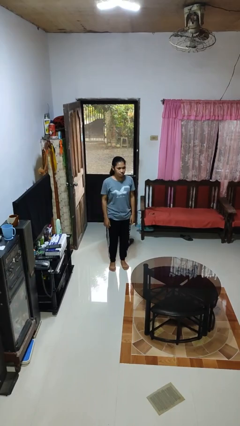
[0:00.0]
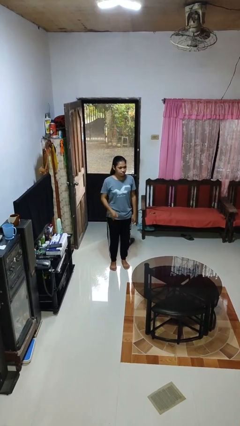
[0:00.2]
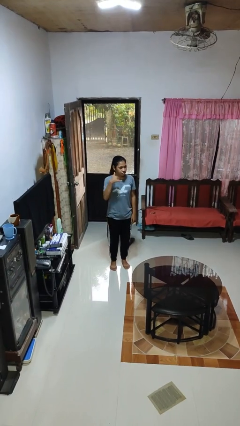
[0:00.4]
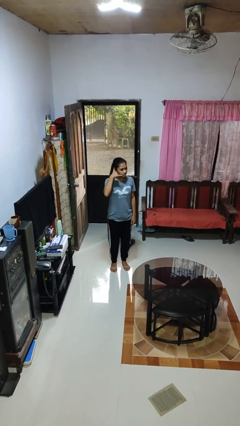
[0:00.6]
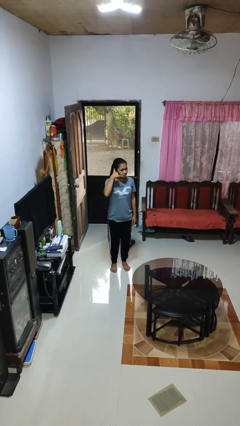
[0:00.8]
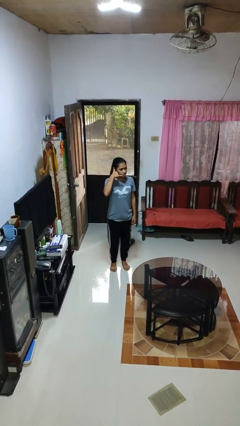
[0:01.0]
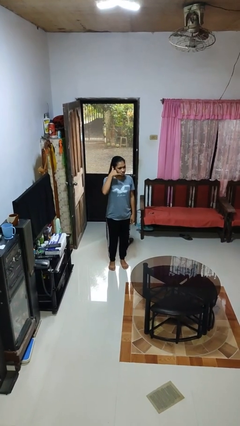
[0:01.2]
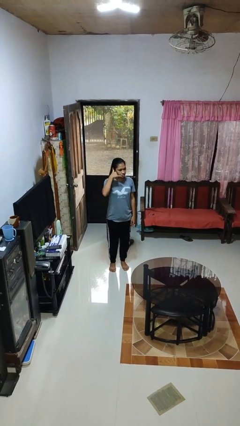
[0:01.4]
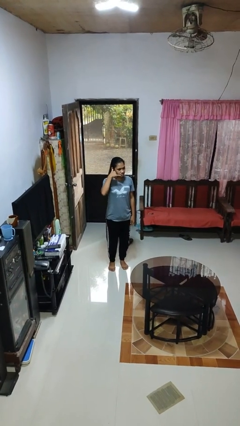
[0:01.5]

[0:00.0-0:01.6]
person gestures call me

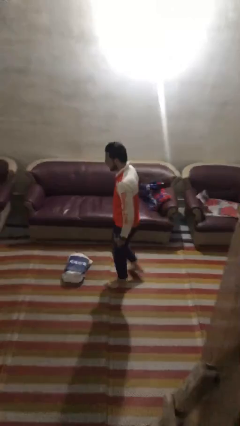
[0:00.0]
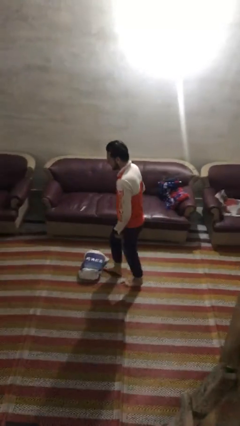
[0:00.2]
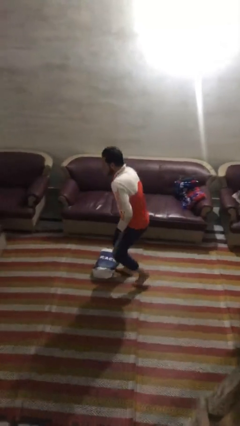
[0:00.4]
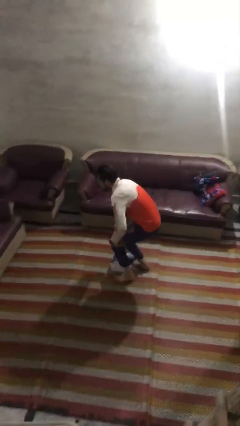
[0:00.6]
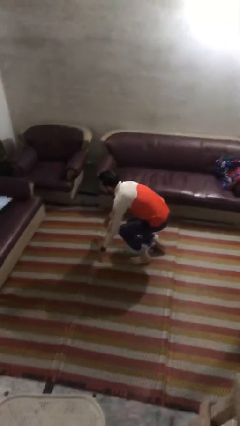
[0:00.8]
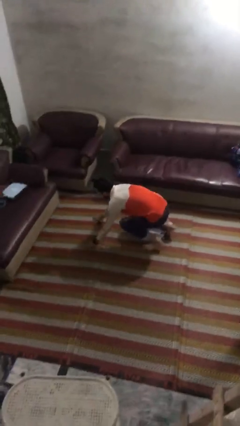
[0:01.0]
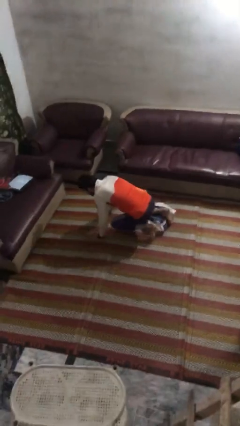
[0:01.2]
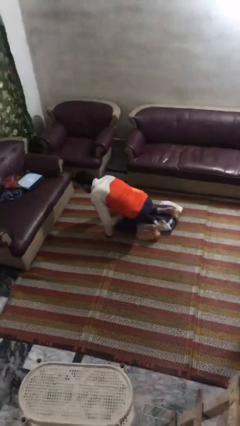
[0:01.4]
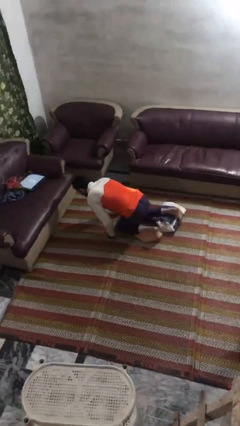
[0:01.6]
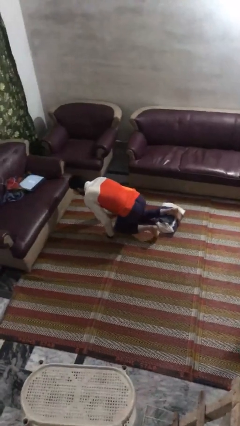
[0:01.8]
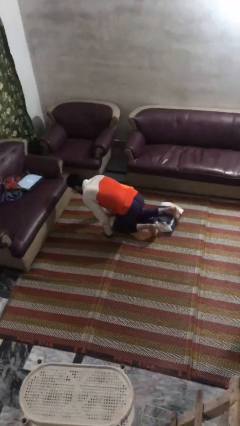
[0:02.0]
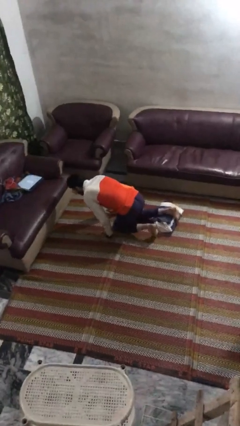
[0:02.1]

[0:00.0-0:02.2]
person trips on object on floor

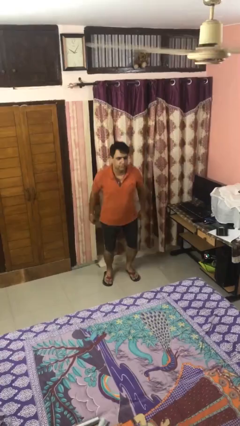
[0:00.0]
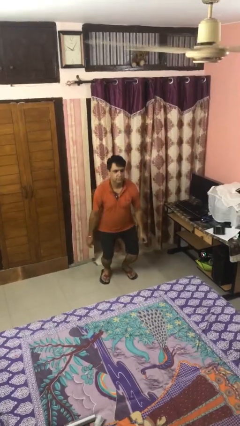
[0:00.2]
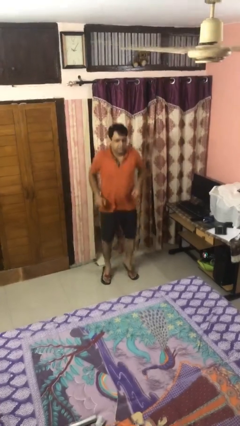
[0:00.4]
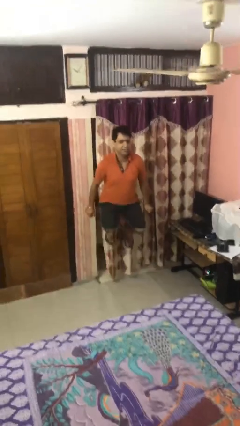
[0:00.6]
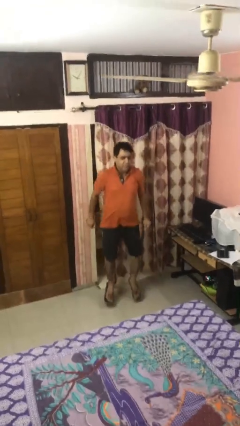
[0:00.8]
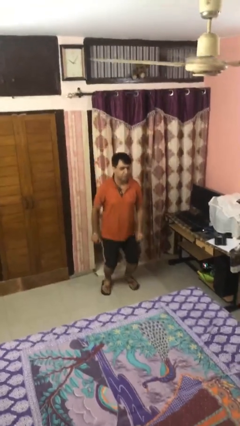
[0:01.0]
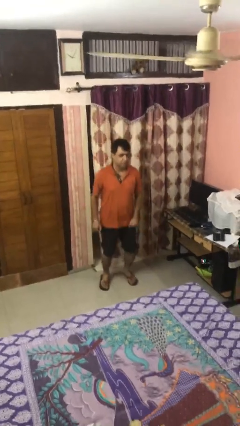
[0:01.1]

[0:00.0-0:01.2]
person jumps

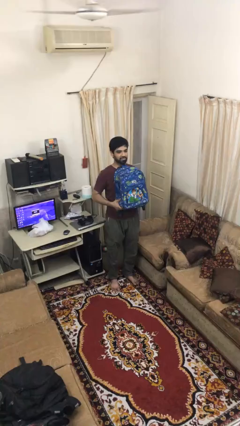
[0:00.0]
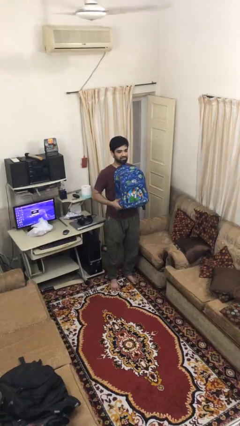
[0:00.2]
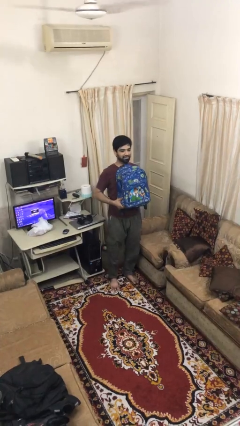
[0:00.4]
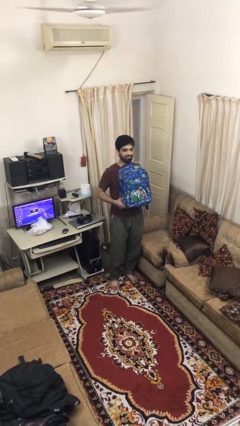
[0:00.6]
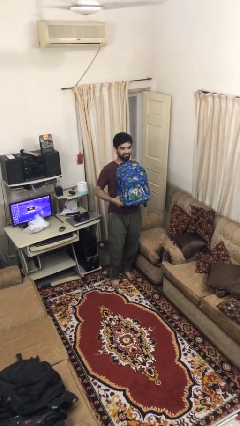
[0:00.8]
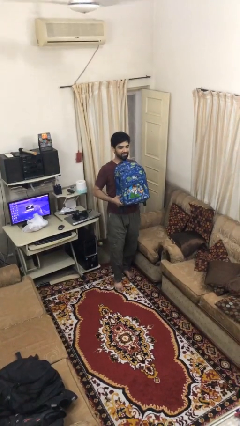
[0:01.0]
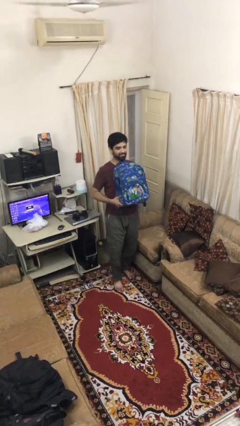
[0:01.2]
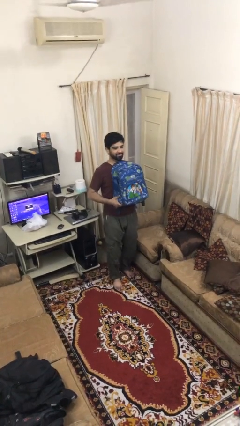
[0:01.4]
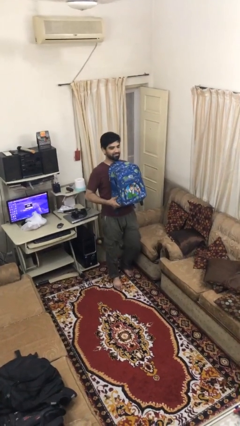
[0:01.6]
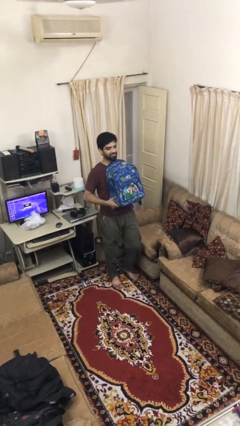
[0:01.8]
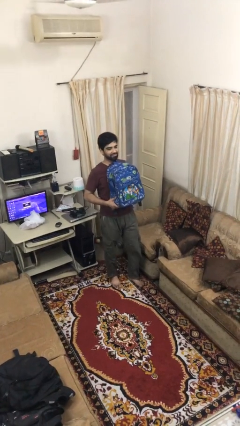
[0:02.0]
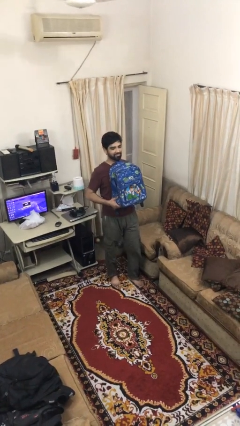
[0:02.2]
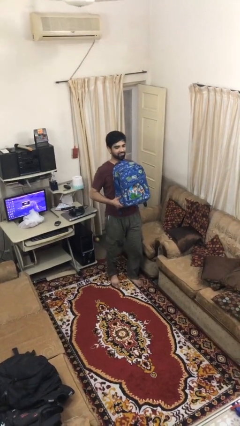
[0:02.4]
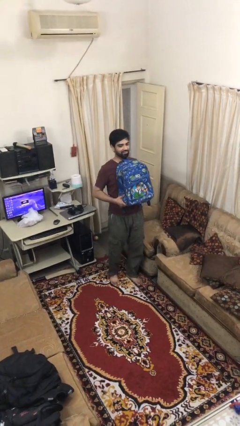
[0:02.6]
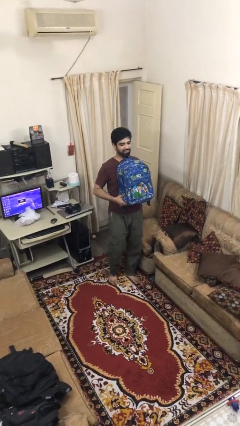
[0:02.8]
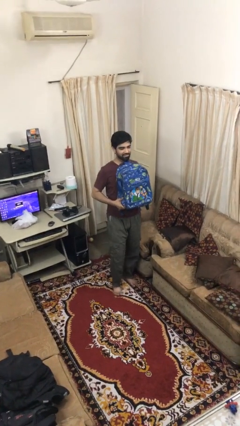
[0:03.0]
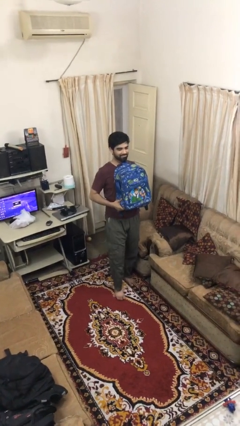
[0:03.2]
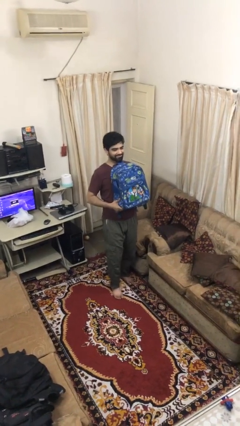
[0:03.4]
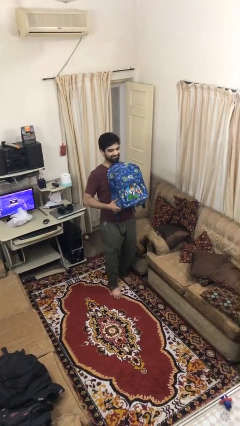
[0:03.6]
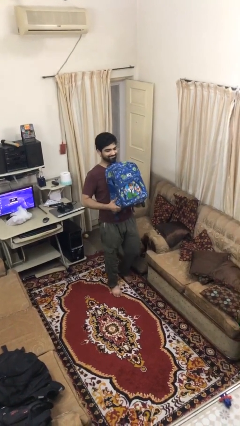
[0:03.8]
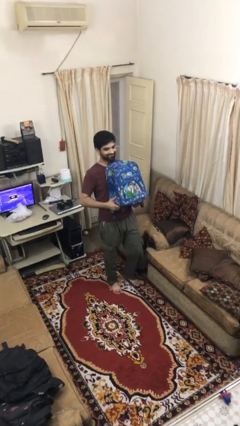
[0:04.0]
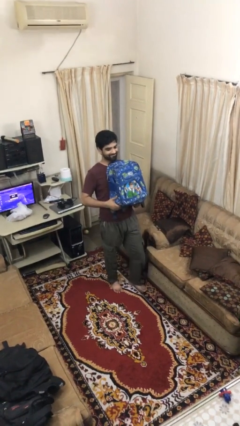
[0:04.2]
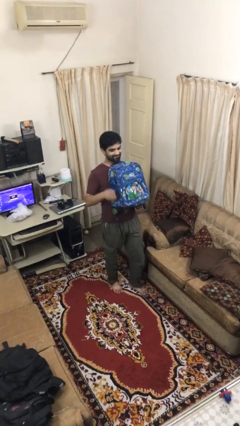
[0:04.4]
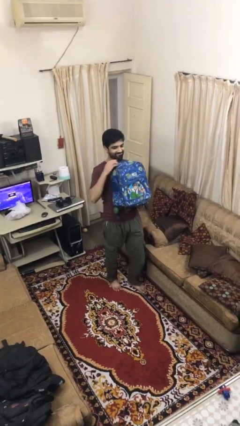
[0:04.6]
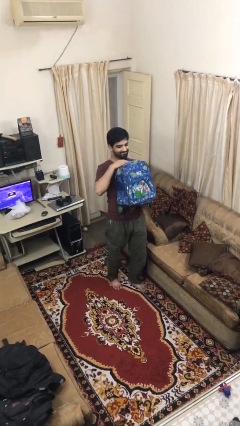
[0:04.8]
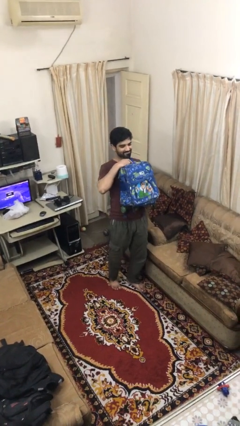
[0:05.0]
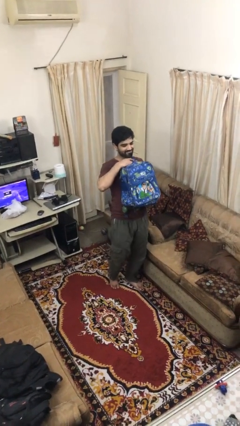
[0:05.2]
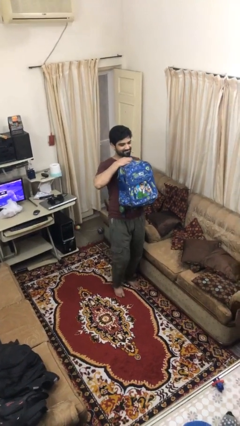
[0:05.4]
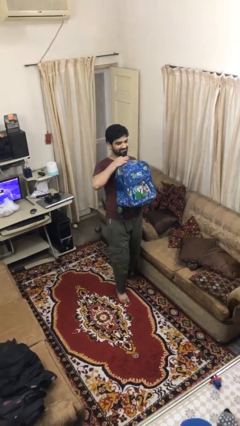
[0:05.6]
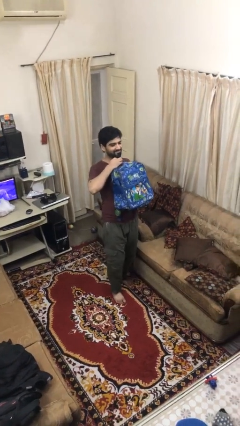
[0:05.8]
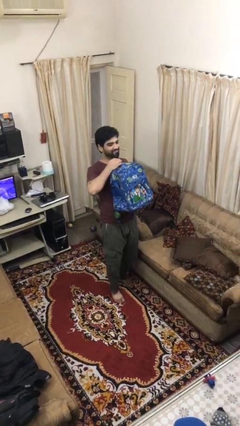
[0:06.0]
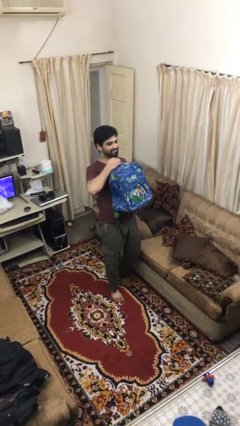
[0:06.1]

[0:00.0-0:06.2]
person carries heavy object

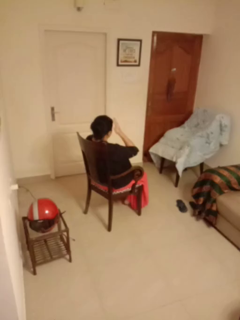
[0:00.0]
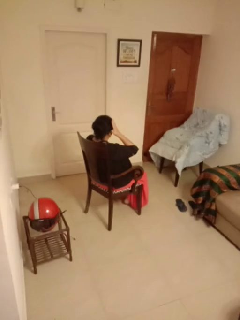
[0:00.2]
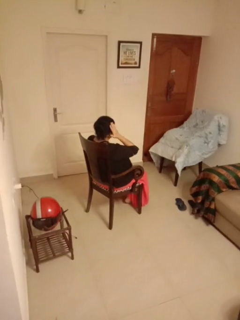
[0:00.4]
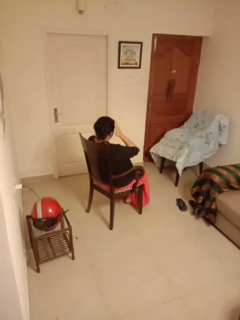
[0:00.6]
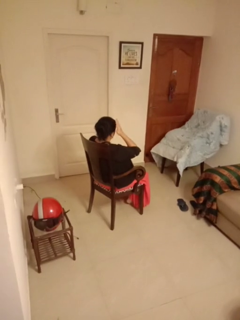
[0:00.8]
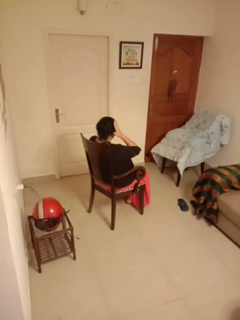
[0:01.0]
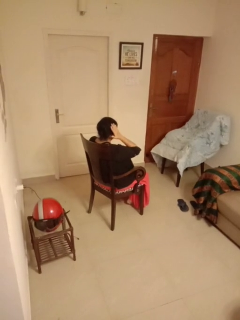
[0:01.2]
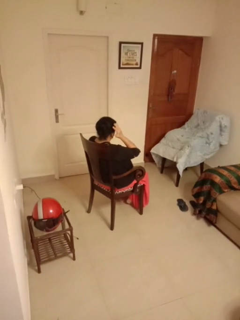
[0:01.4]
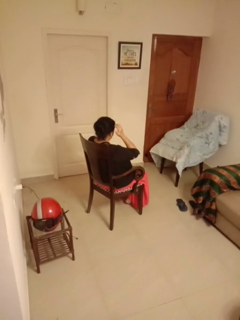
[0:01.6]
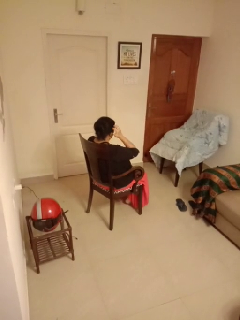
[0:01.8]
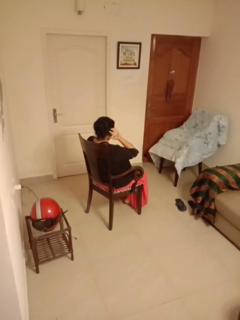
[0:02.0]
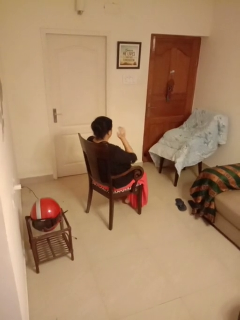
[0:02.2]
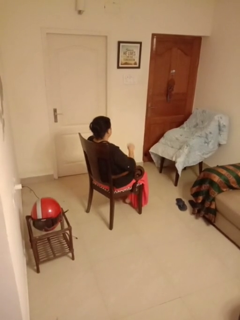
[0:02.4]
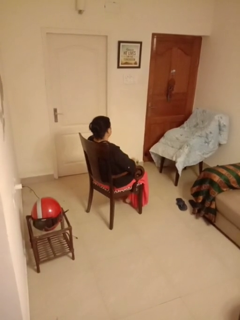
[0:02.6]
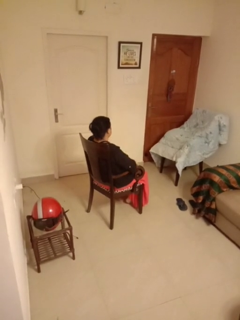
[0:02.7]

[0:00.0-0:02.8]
person strokes hair

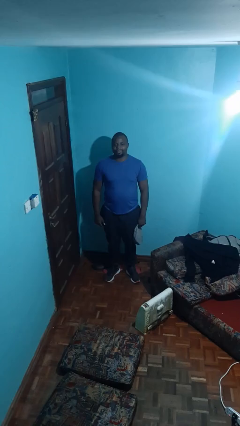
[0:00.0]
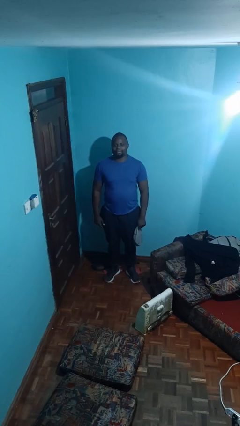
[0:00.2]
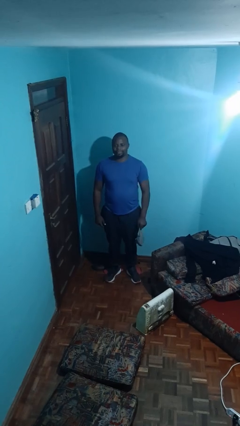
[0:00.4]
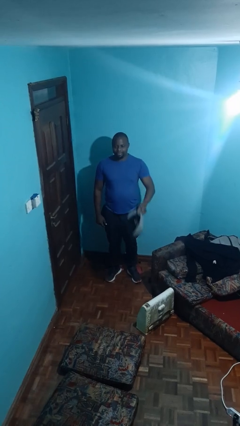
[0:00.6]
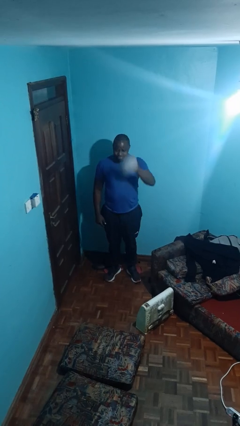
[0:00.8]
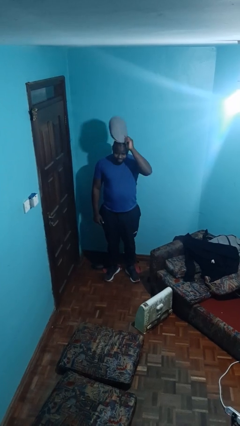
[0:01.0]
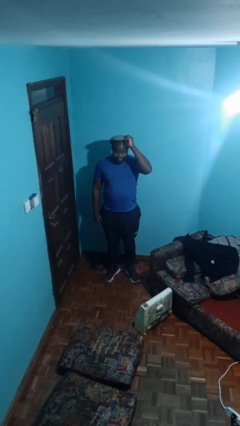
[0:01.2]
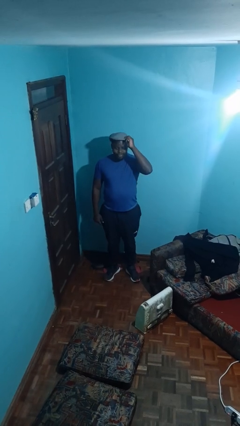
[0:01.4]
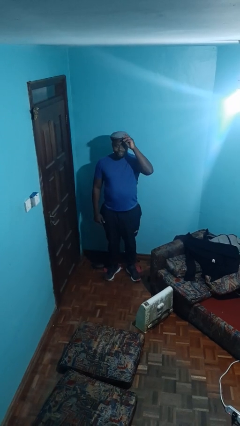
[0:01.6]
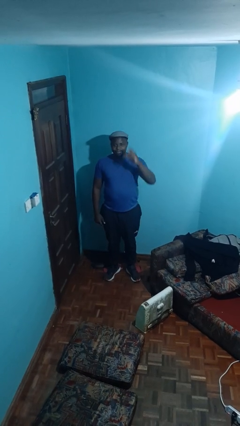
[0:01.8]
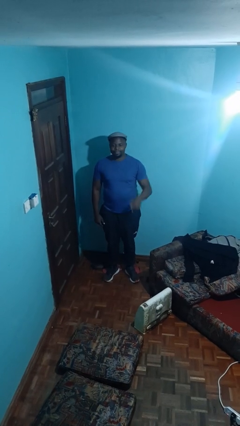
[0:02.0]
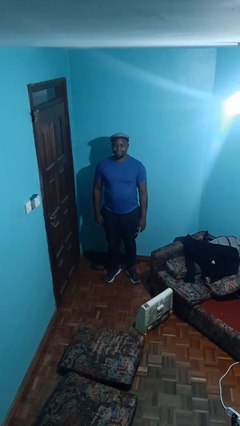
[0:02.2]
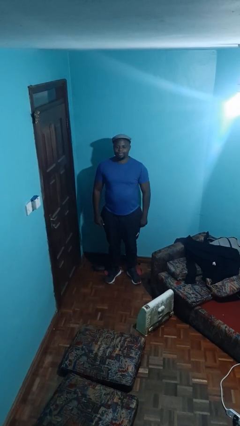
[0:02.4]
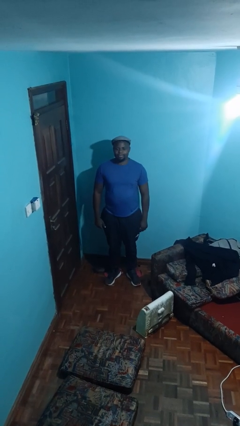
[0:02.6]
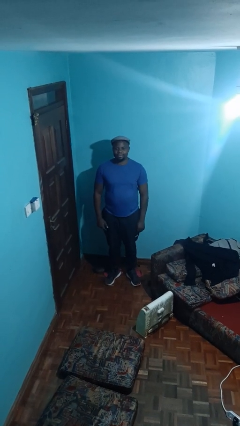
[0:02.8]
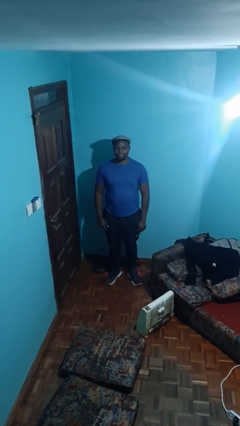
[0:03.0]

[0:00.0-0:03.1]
person puts on hat

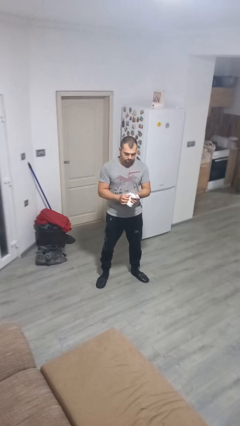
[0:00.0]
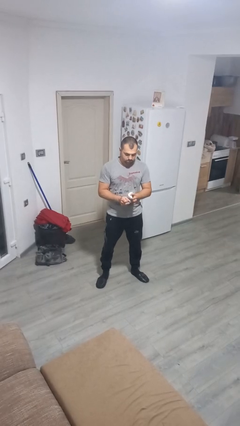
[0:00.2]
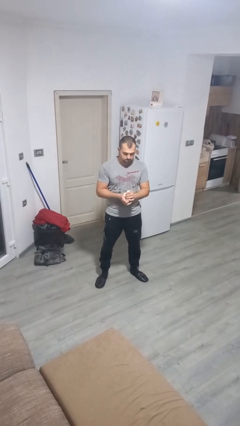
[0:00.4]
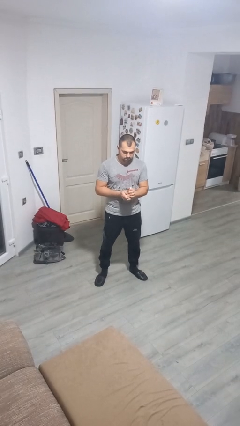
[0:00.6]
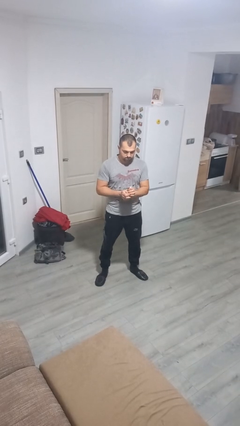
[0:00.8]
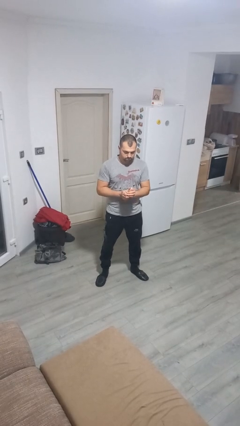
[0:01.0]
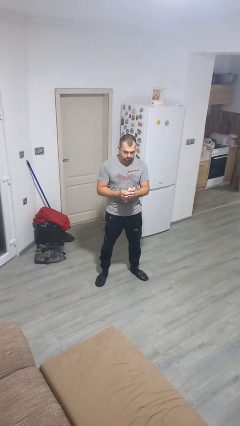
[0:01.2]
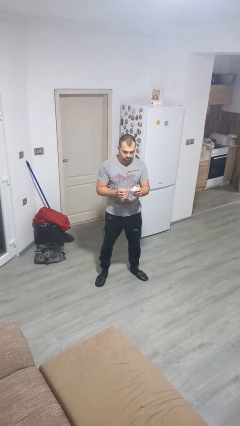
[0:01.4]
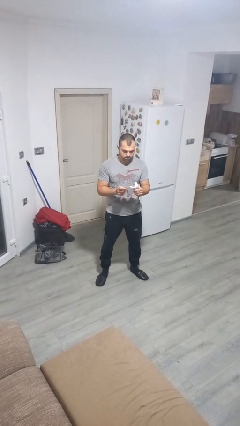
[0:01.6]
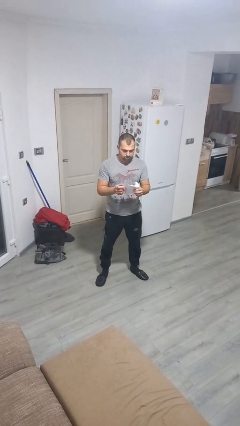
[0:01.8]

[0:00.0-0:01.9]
person crumples paper
